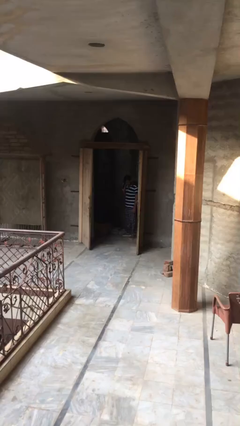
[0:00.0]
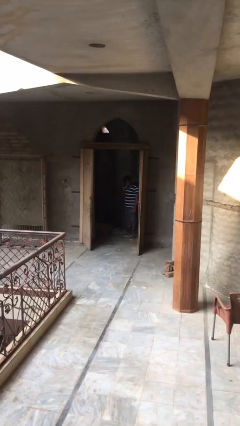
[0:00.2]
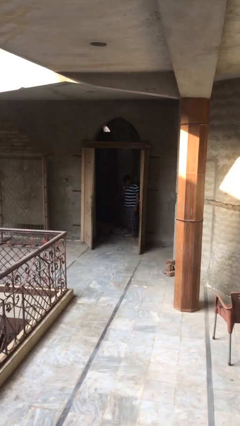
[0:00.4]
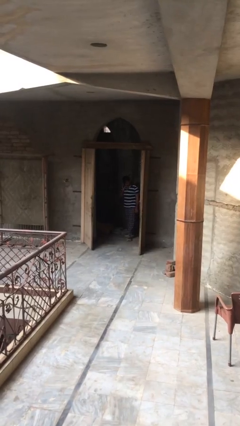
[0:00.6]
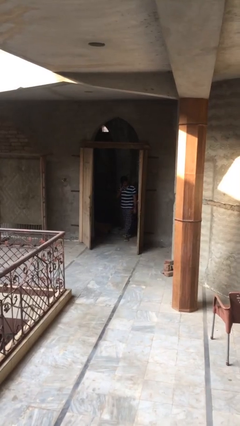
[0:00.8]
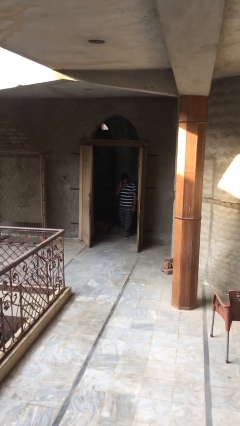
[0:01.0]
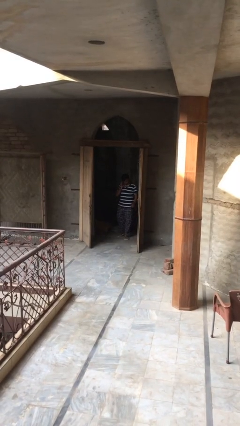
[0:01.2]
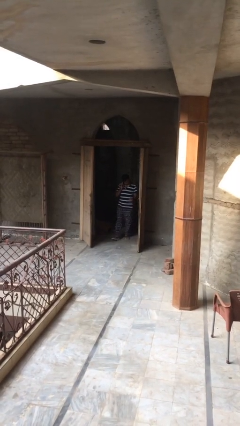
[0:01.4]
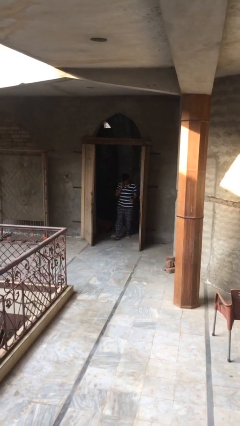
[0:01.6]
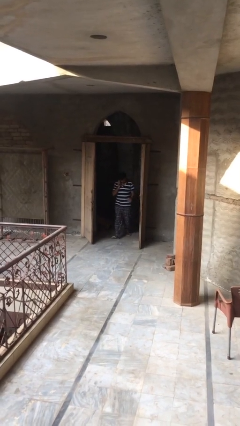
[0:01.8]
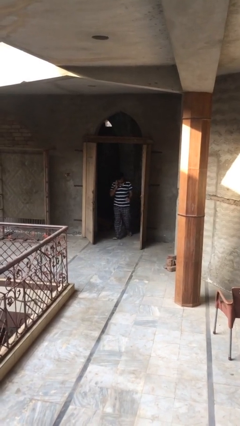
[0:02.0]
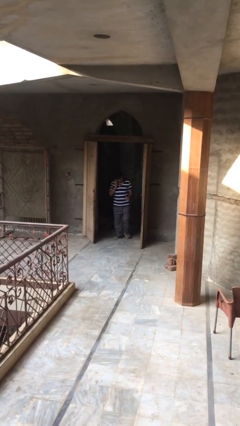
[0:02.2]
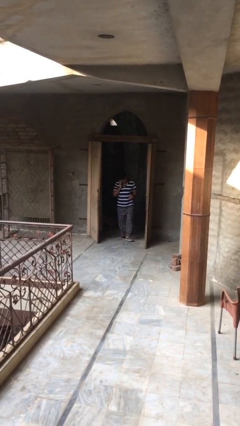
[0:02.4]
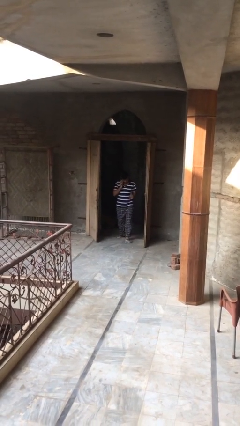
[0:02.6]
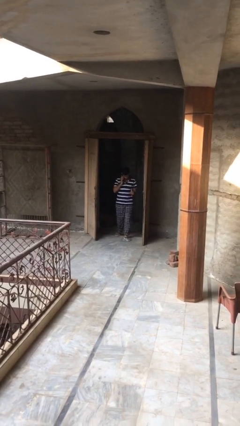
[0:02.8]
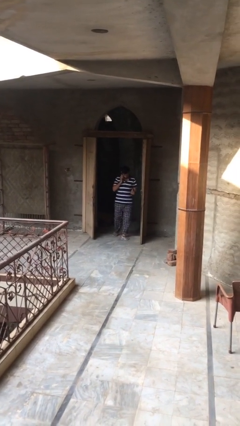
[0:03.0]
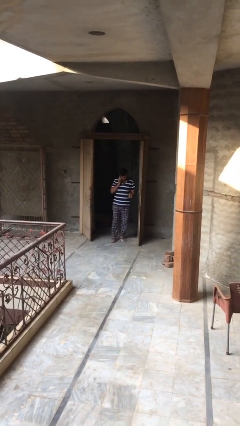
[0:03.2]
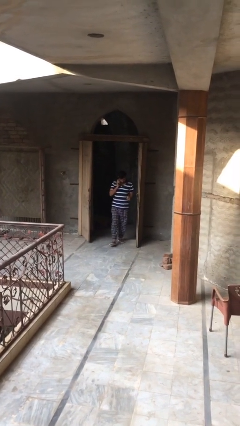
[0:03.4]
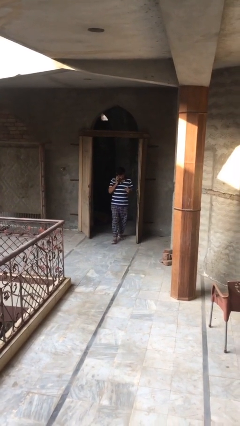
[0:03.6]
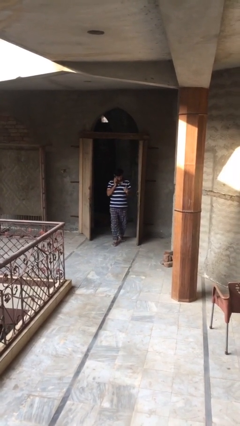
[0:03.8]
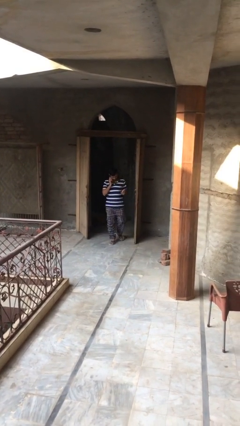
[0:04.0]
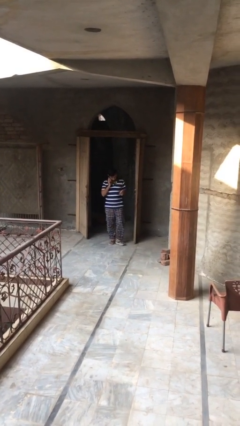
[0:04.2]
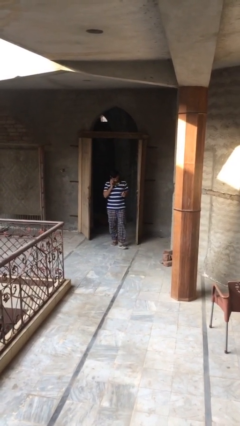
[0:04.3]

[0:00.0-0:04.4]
person enters scene through structure

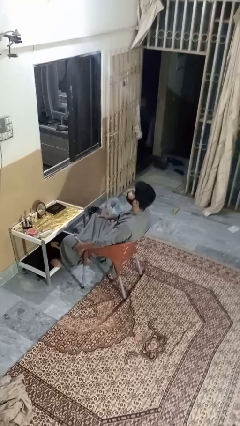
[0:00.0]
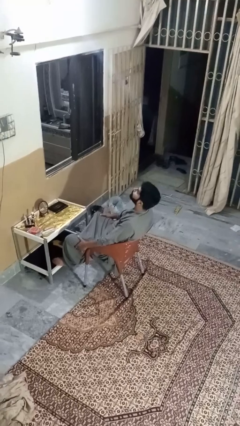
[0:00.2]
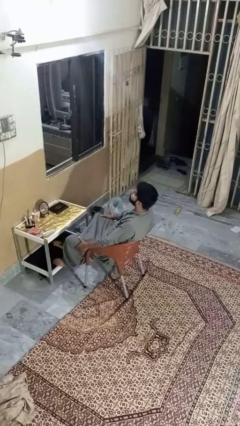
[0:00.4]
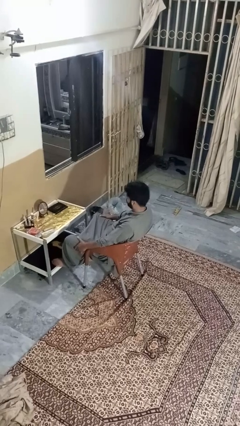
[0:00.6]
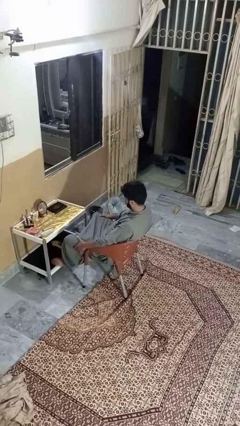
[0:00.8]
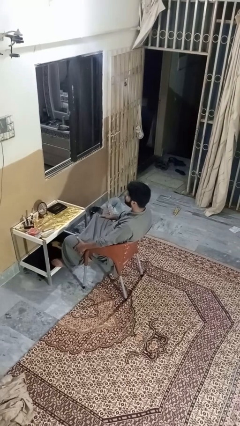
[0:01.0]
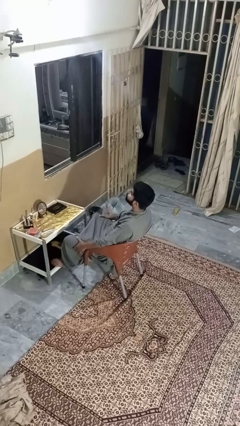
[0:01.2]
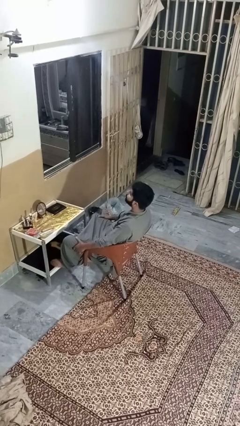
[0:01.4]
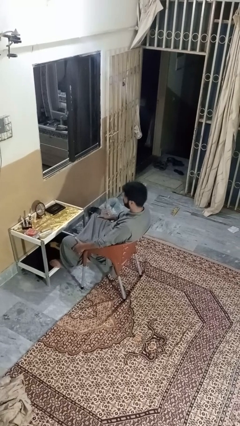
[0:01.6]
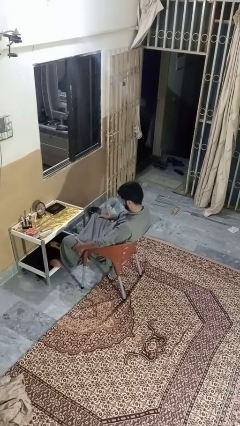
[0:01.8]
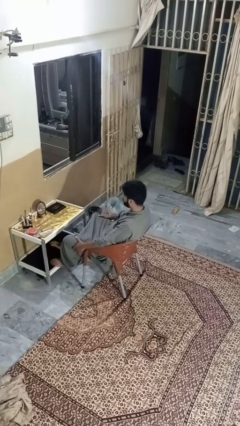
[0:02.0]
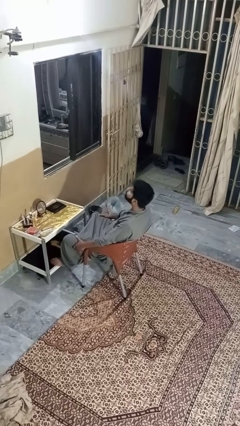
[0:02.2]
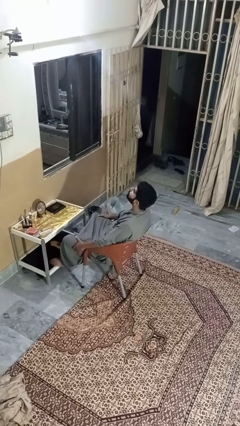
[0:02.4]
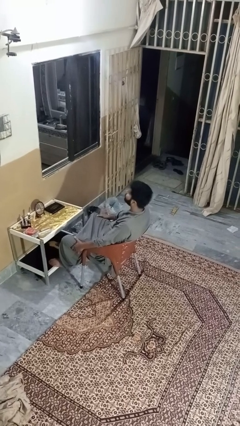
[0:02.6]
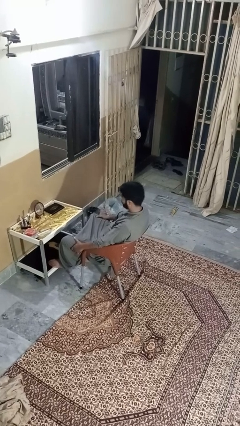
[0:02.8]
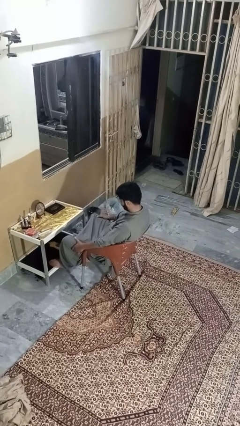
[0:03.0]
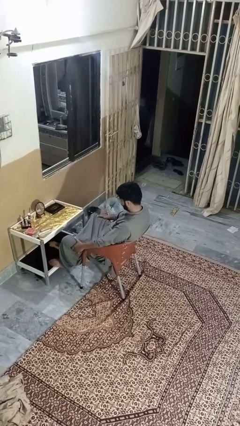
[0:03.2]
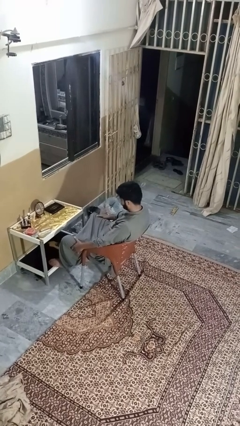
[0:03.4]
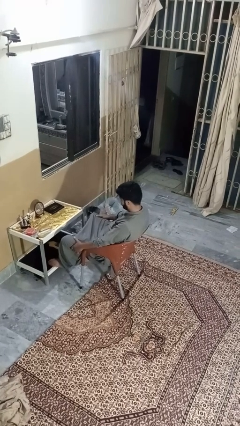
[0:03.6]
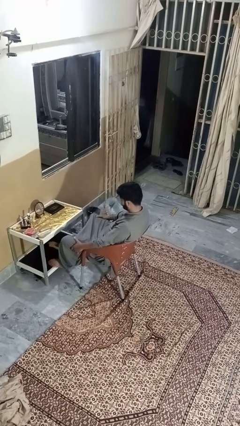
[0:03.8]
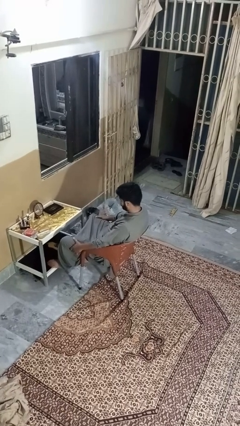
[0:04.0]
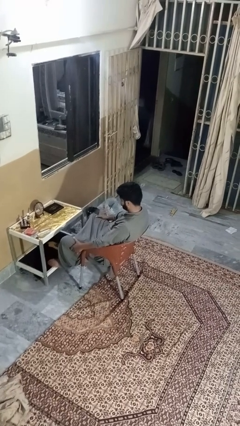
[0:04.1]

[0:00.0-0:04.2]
person nods head

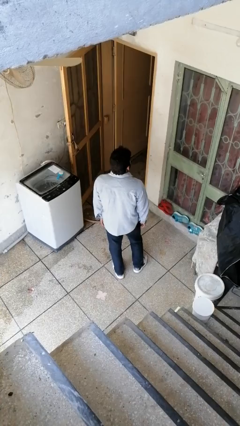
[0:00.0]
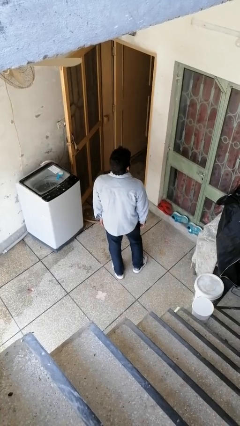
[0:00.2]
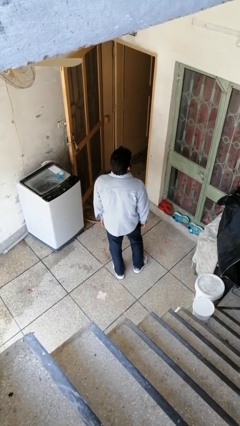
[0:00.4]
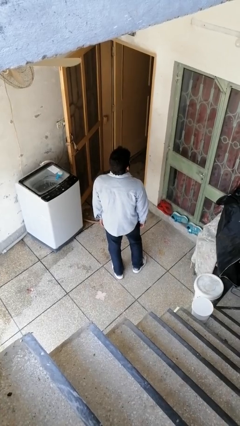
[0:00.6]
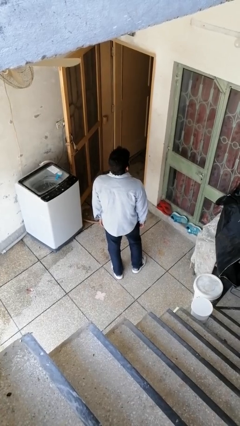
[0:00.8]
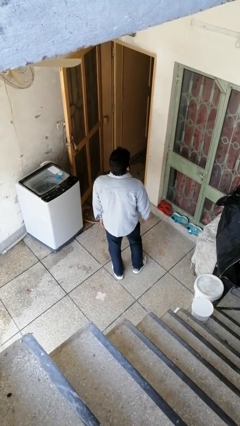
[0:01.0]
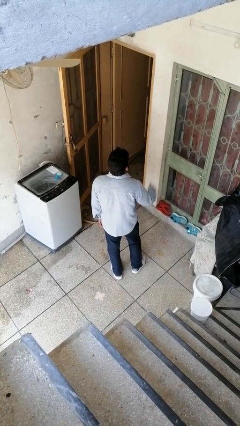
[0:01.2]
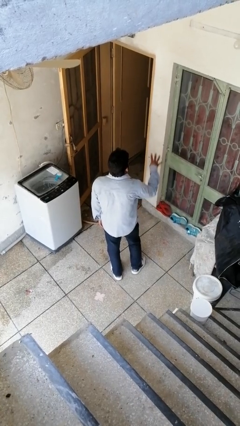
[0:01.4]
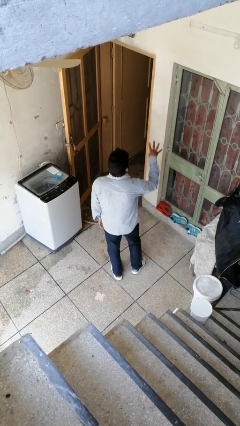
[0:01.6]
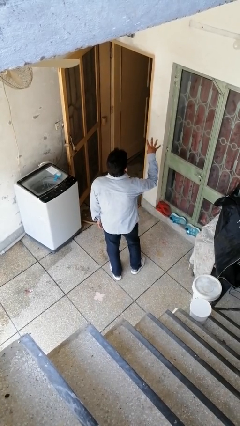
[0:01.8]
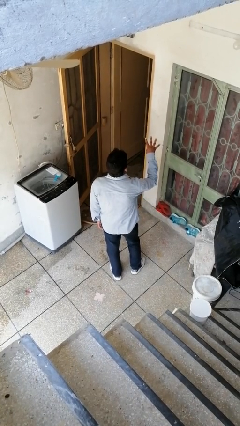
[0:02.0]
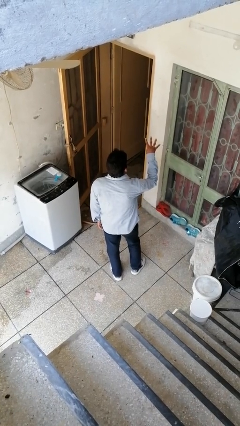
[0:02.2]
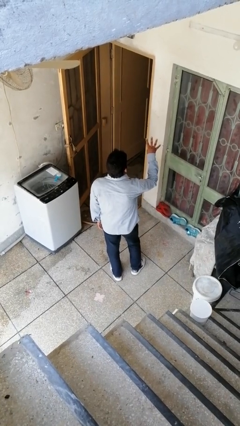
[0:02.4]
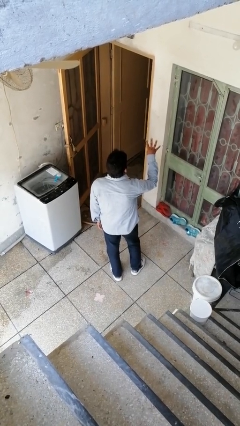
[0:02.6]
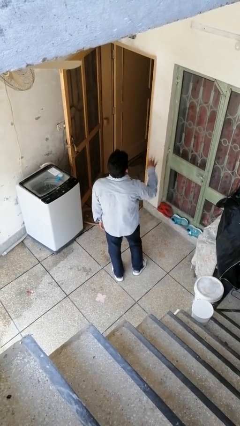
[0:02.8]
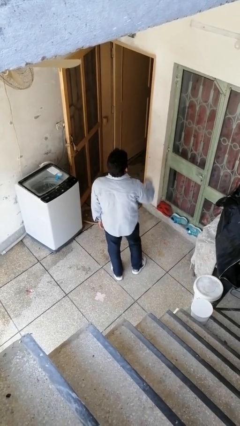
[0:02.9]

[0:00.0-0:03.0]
person gestures number four

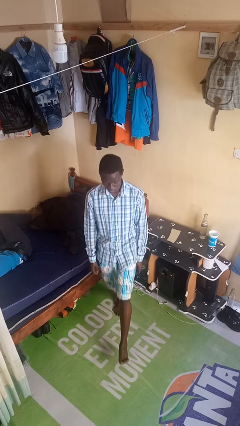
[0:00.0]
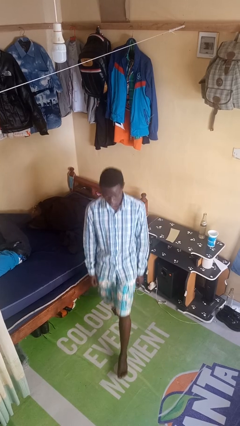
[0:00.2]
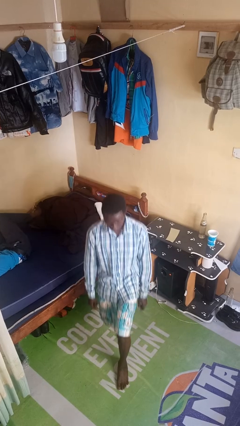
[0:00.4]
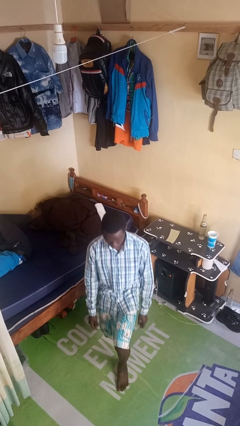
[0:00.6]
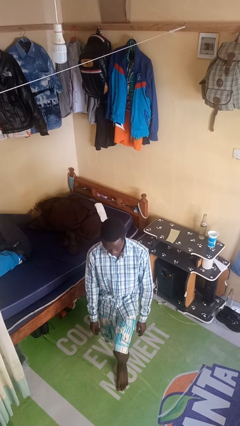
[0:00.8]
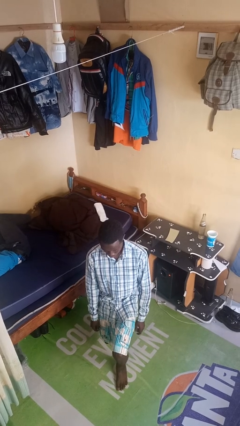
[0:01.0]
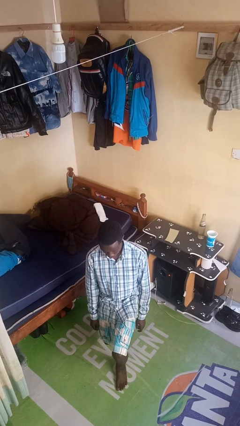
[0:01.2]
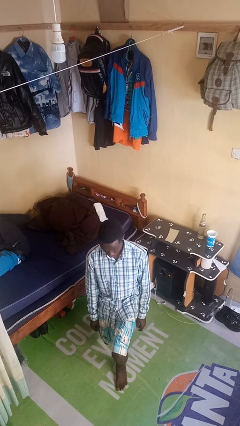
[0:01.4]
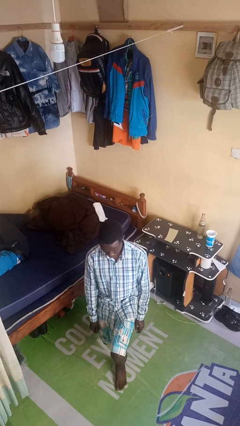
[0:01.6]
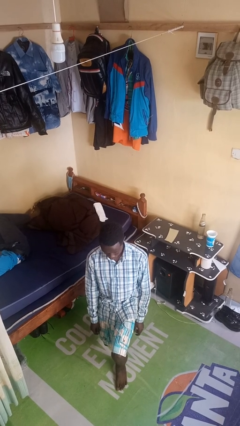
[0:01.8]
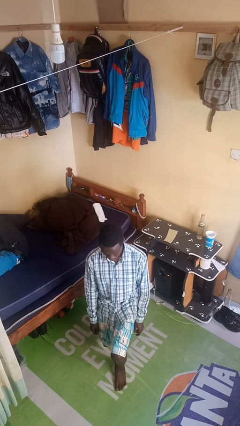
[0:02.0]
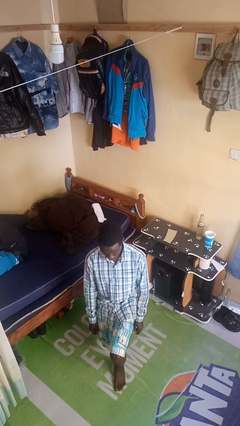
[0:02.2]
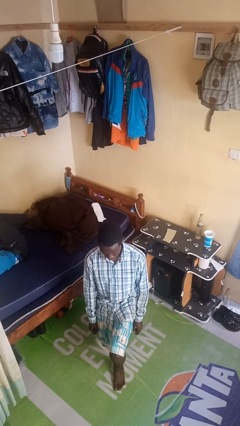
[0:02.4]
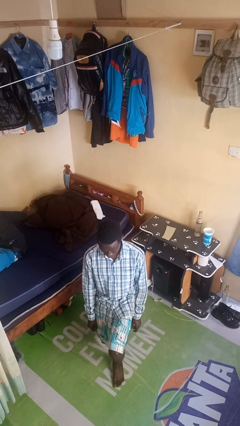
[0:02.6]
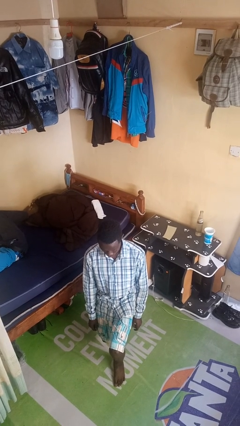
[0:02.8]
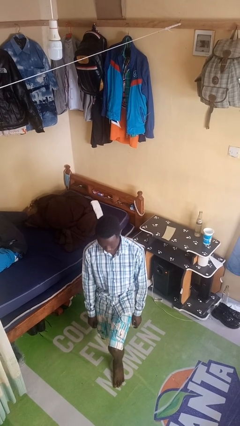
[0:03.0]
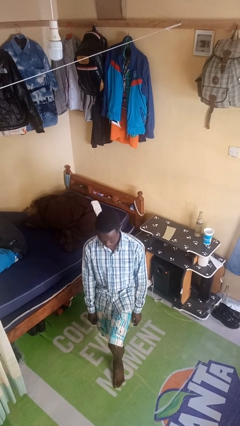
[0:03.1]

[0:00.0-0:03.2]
person exercises with lunges

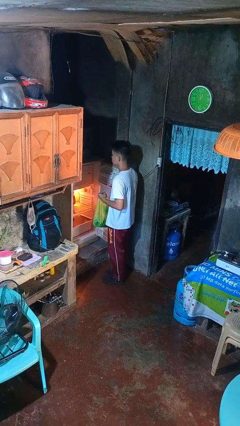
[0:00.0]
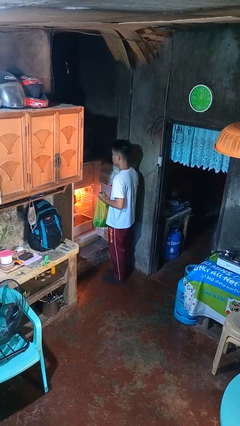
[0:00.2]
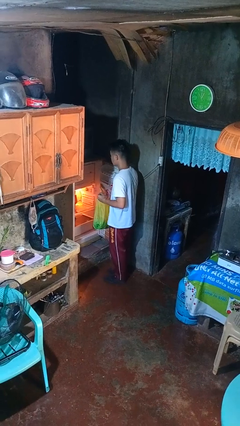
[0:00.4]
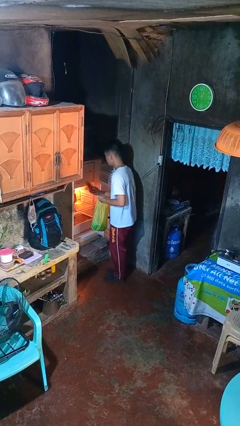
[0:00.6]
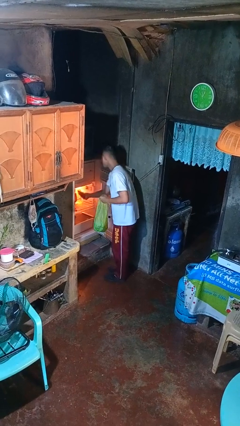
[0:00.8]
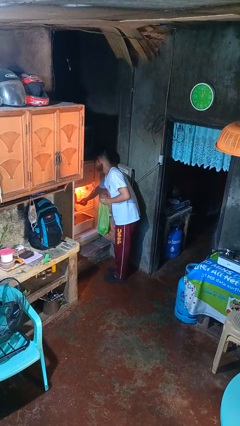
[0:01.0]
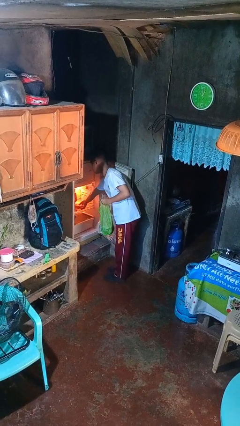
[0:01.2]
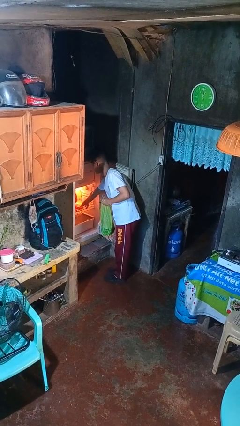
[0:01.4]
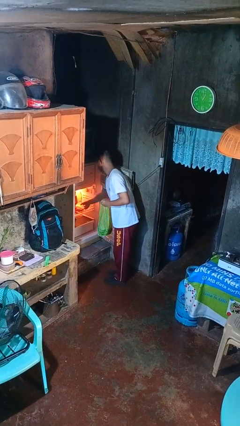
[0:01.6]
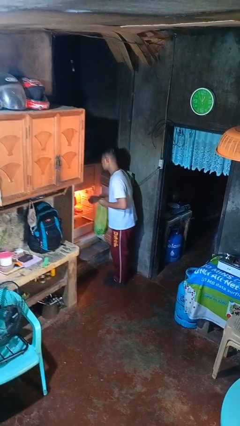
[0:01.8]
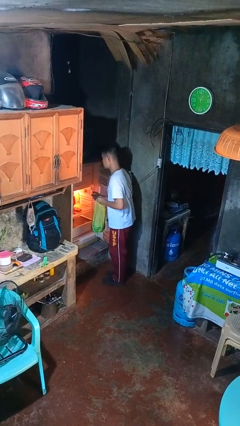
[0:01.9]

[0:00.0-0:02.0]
person loads groceries into refrigerator

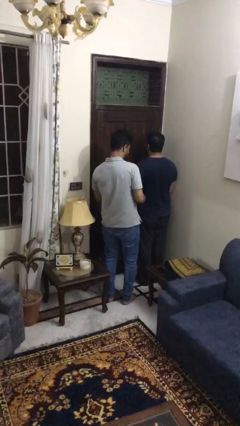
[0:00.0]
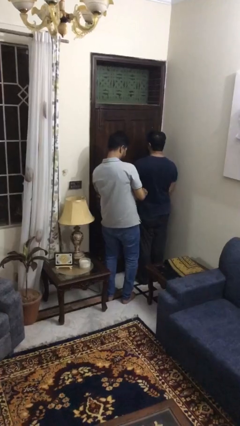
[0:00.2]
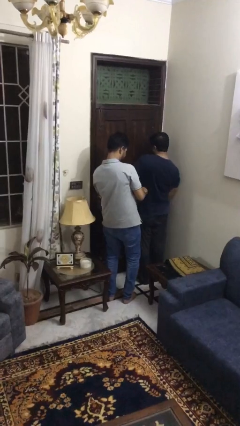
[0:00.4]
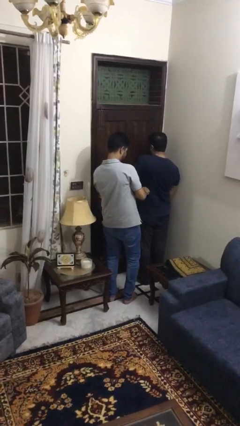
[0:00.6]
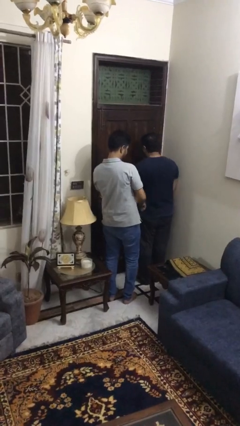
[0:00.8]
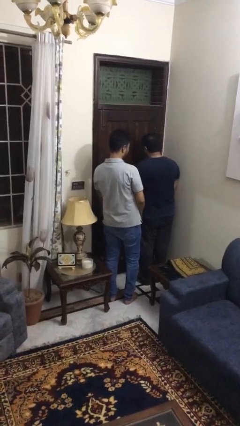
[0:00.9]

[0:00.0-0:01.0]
person tickles person
